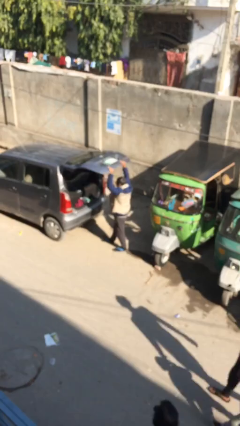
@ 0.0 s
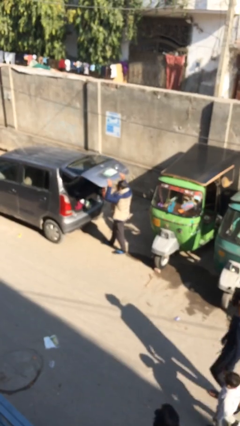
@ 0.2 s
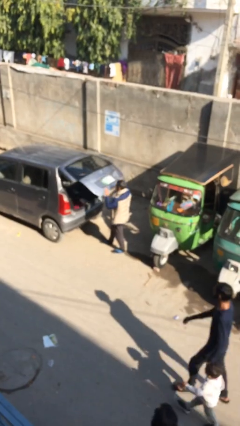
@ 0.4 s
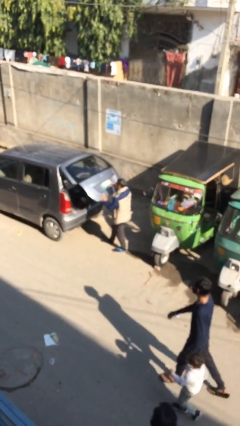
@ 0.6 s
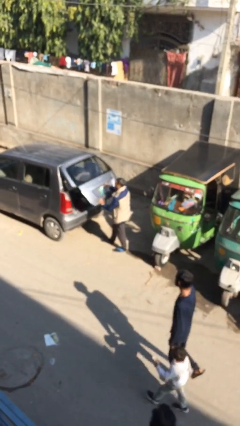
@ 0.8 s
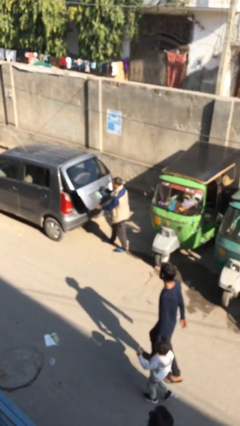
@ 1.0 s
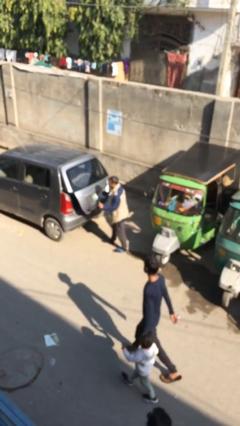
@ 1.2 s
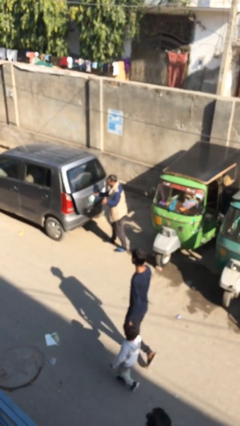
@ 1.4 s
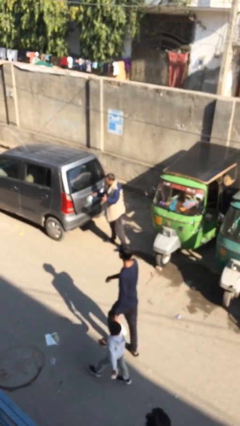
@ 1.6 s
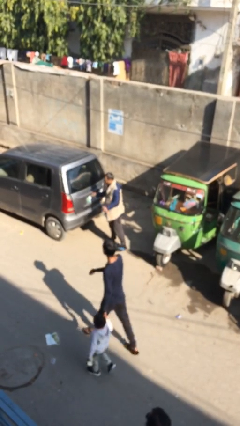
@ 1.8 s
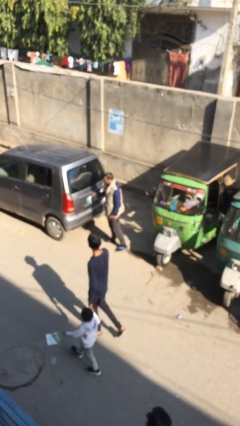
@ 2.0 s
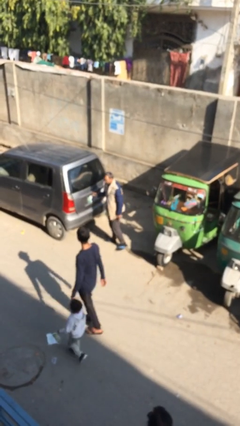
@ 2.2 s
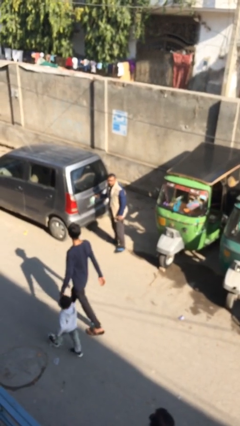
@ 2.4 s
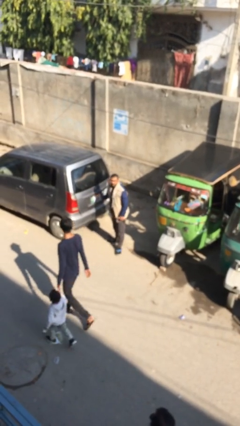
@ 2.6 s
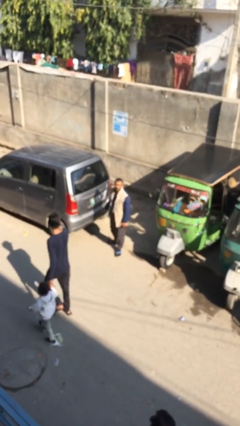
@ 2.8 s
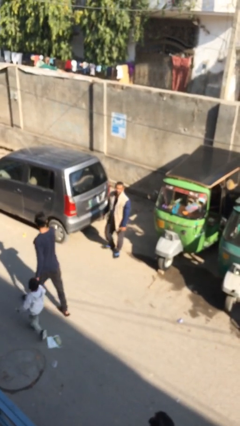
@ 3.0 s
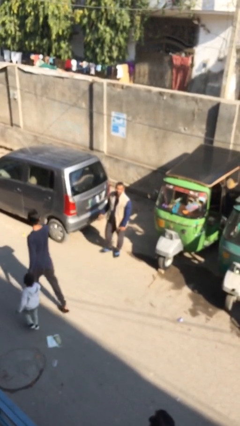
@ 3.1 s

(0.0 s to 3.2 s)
person closes car trunk

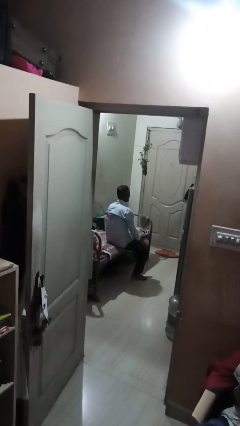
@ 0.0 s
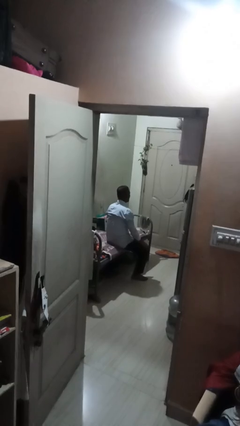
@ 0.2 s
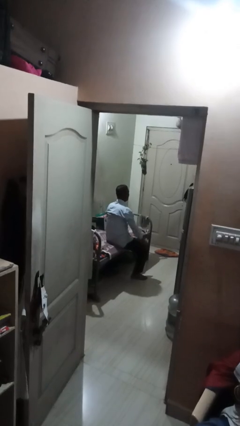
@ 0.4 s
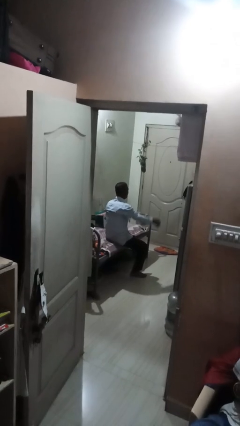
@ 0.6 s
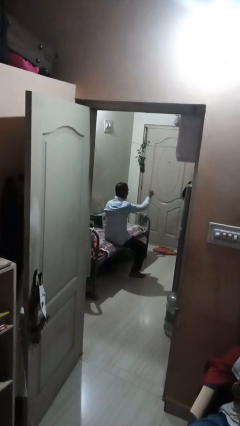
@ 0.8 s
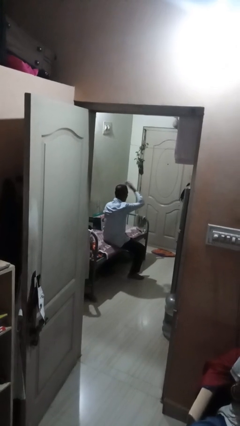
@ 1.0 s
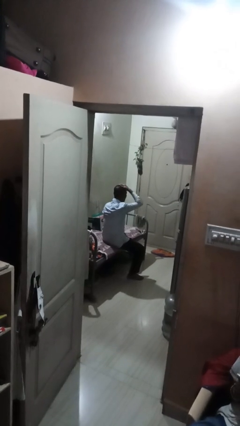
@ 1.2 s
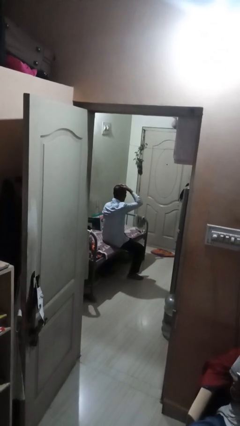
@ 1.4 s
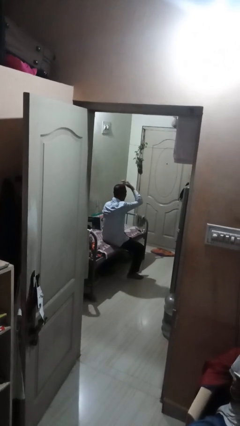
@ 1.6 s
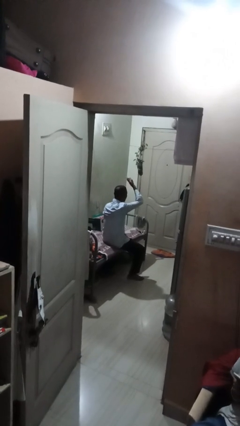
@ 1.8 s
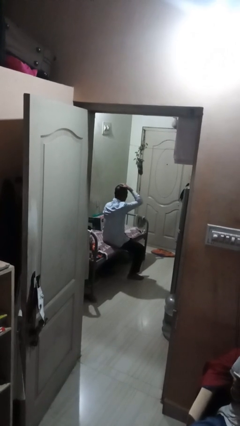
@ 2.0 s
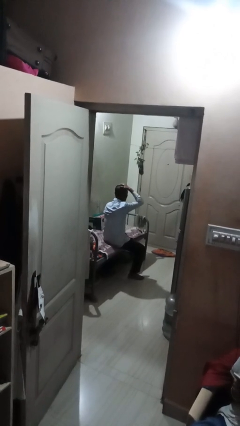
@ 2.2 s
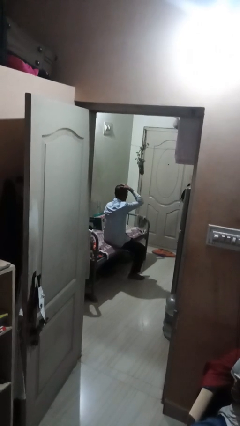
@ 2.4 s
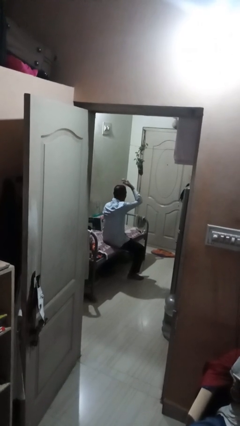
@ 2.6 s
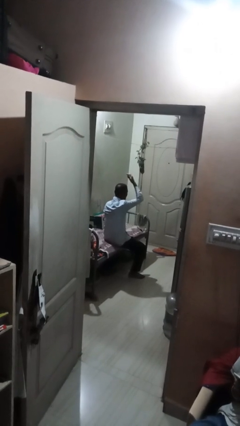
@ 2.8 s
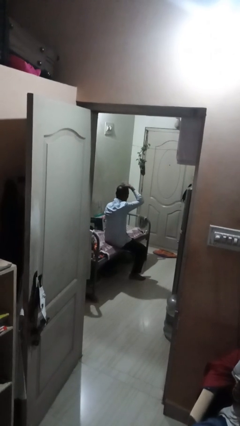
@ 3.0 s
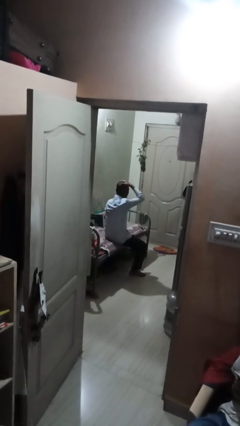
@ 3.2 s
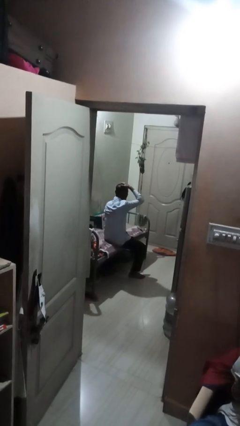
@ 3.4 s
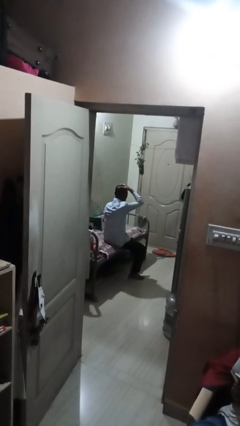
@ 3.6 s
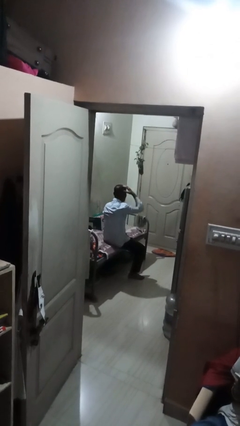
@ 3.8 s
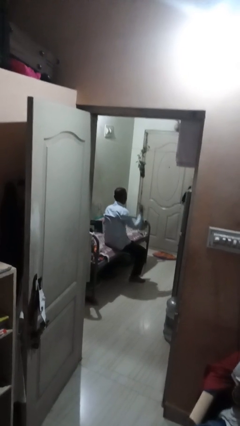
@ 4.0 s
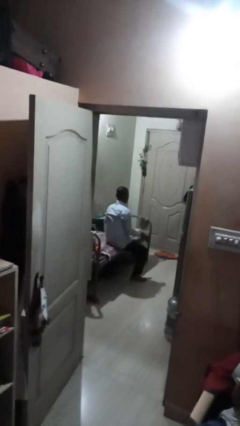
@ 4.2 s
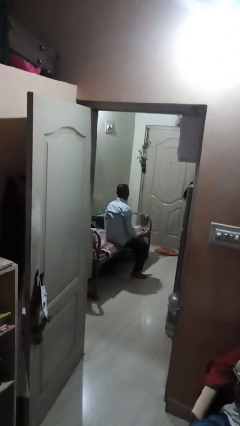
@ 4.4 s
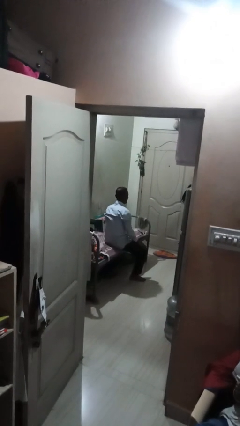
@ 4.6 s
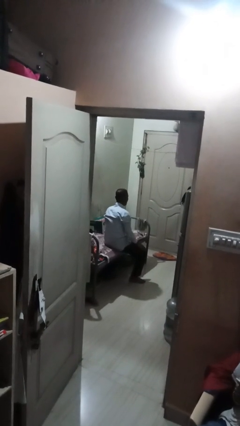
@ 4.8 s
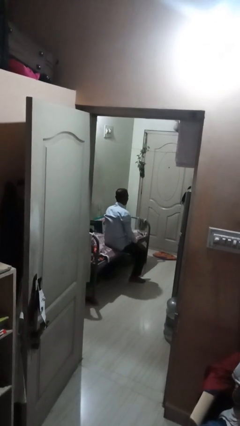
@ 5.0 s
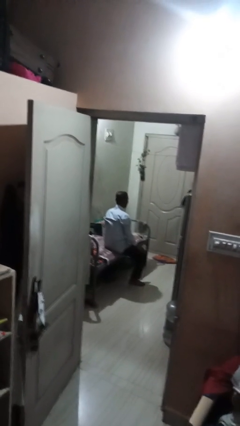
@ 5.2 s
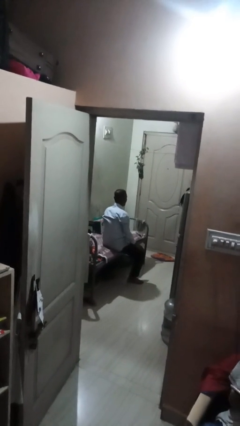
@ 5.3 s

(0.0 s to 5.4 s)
person pats head

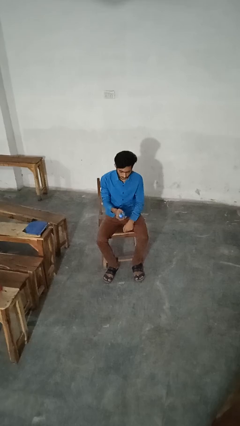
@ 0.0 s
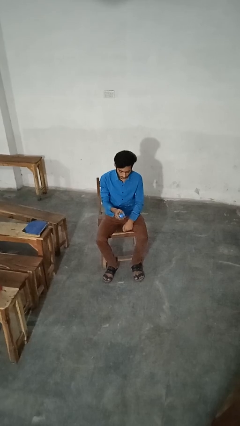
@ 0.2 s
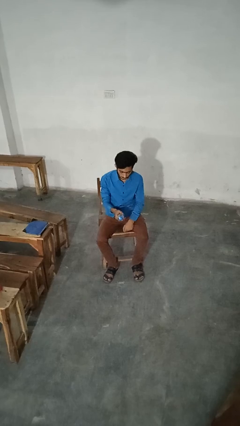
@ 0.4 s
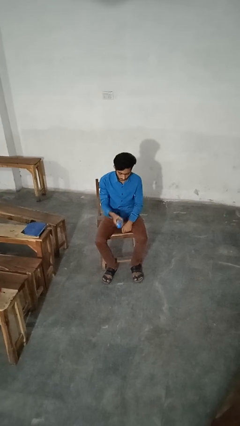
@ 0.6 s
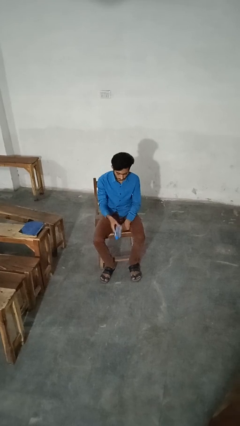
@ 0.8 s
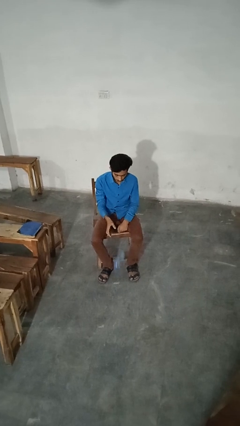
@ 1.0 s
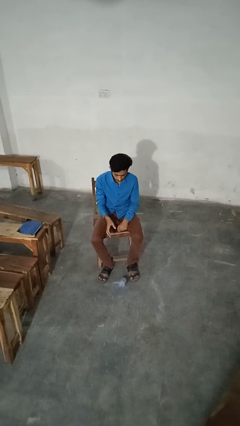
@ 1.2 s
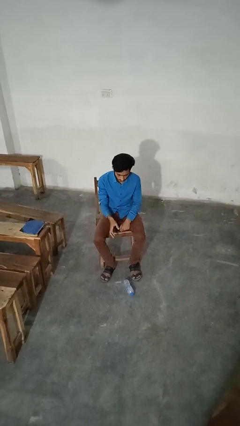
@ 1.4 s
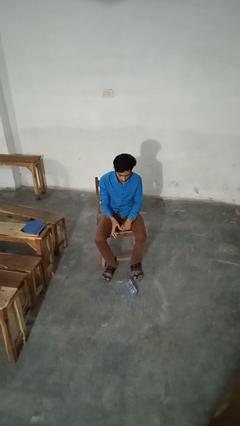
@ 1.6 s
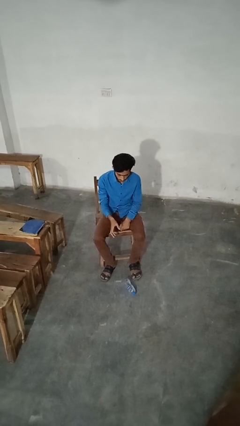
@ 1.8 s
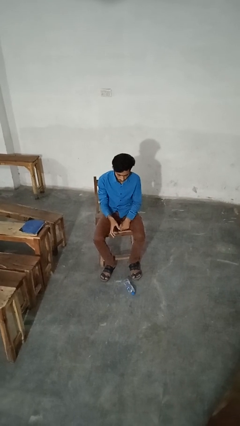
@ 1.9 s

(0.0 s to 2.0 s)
person drops object

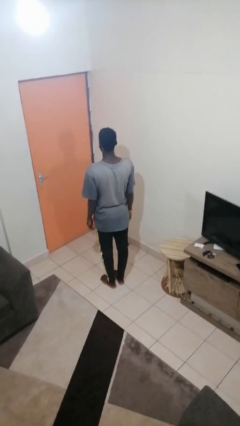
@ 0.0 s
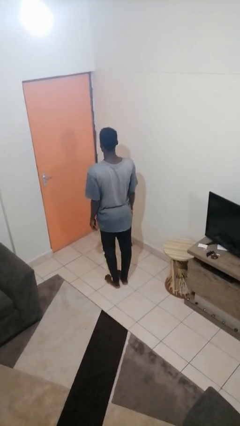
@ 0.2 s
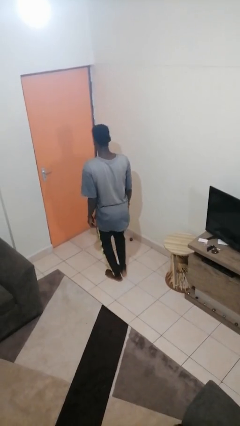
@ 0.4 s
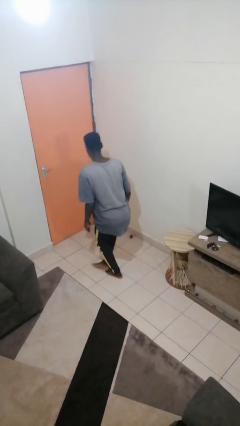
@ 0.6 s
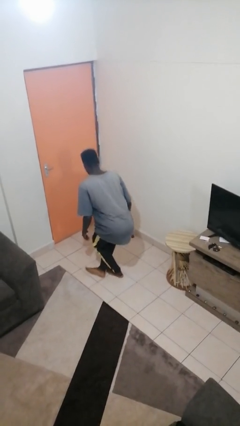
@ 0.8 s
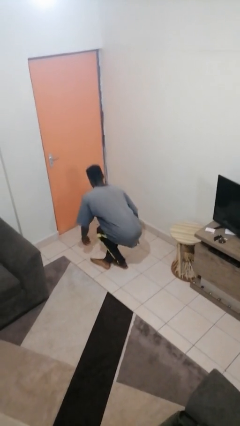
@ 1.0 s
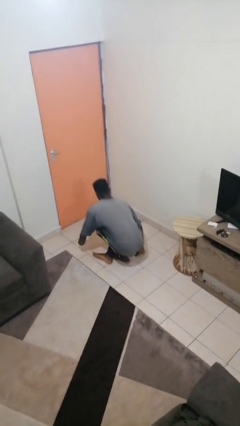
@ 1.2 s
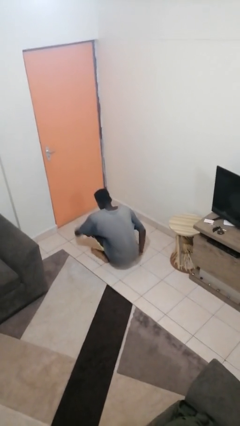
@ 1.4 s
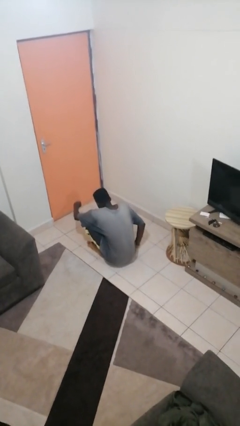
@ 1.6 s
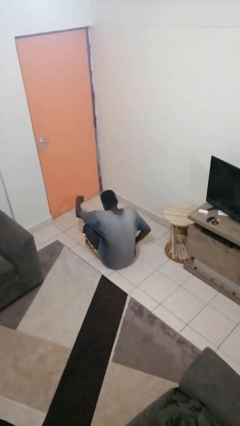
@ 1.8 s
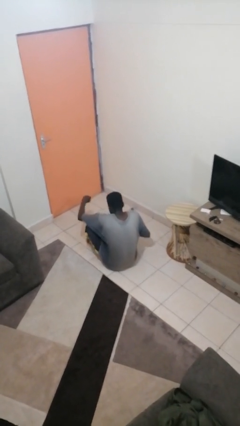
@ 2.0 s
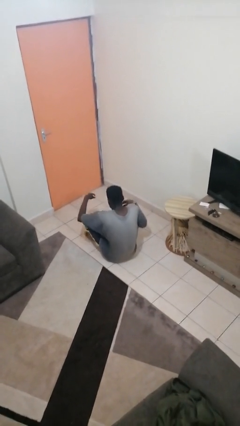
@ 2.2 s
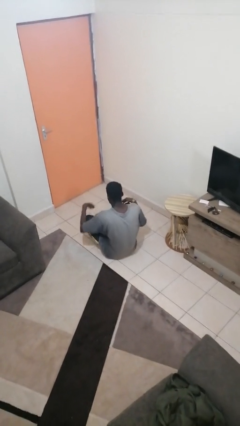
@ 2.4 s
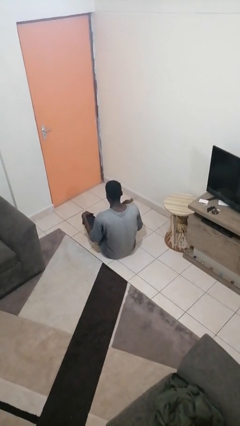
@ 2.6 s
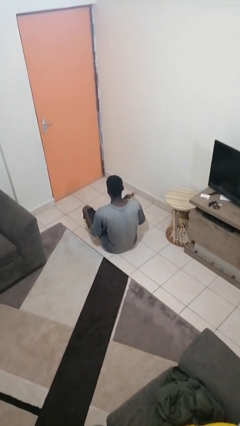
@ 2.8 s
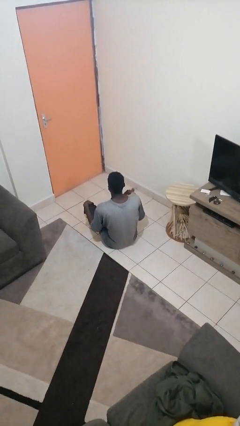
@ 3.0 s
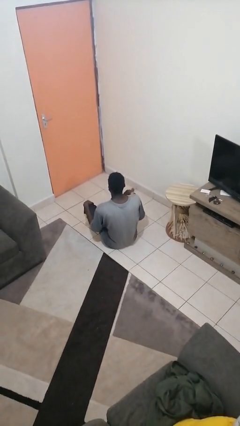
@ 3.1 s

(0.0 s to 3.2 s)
person sits crisscross

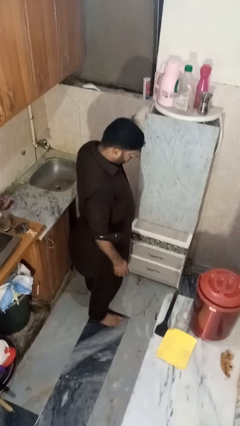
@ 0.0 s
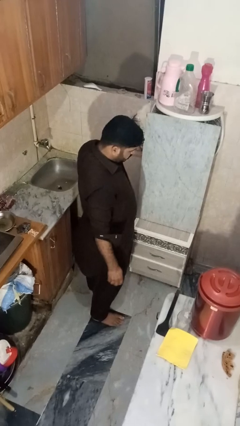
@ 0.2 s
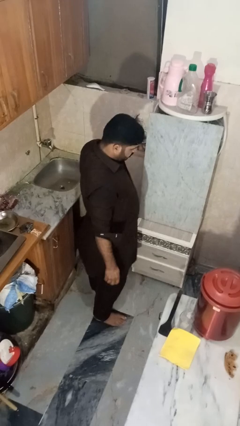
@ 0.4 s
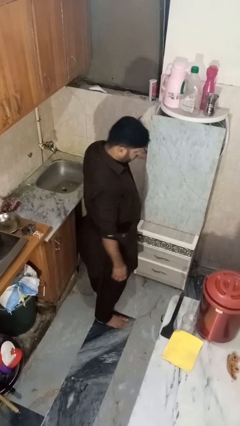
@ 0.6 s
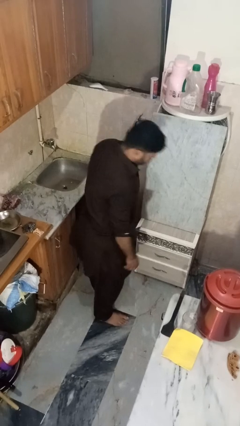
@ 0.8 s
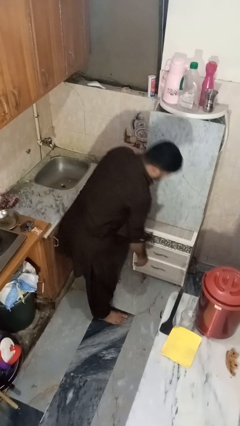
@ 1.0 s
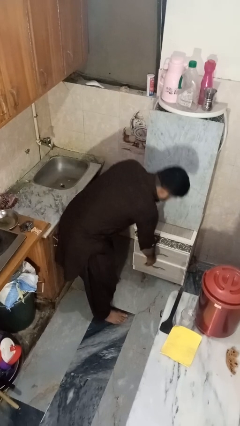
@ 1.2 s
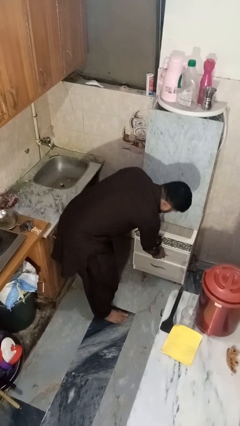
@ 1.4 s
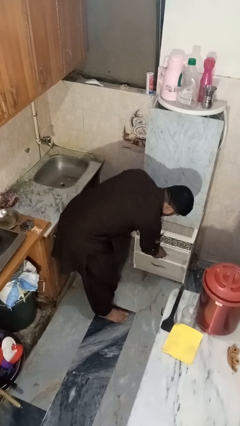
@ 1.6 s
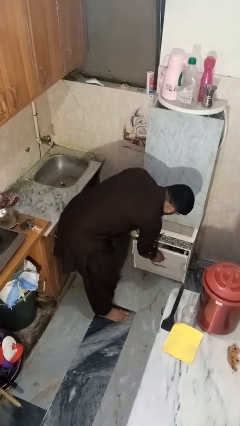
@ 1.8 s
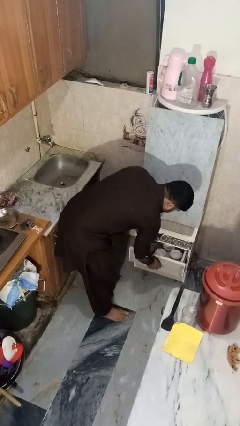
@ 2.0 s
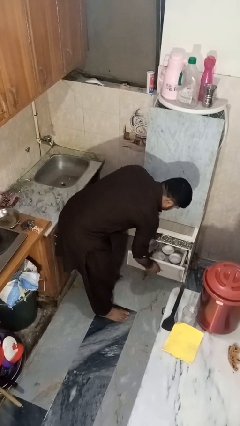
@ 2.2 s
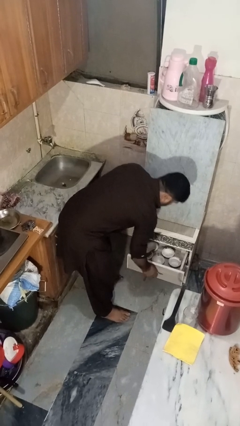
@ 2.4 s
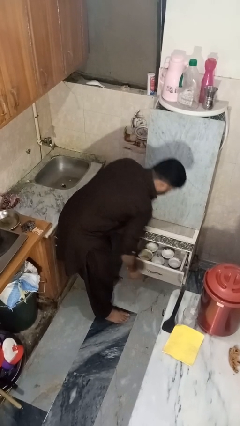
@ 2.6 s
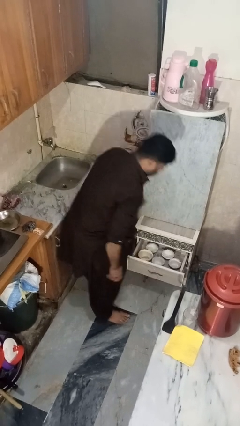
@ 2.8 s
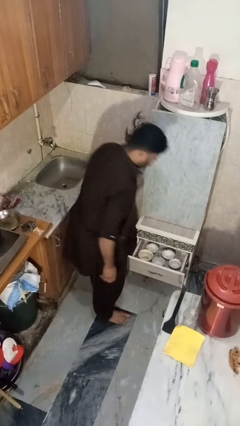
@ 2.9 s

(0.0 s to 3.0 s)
person opens kitchen drawer

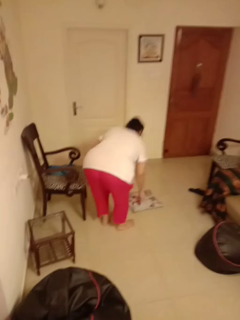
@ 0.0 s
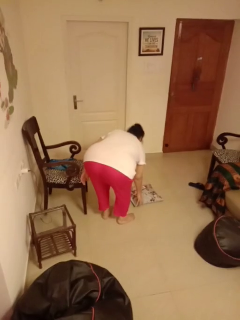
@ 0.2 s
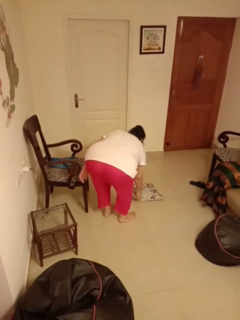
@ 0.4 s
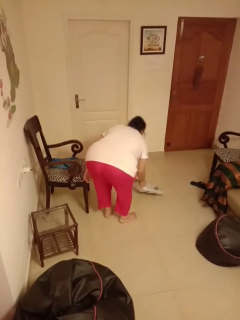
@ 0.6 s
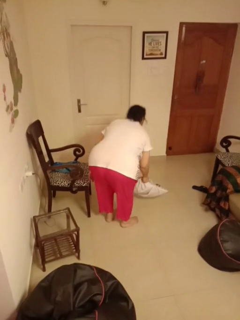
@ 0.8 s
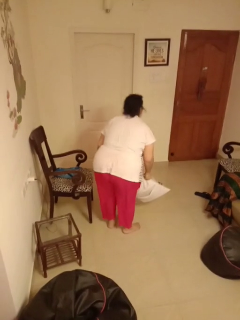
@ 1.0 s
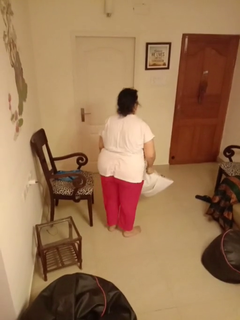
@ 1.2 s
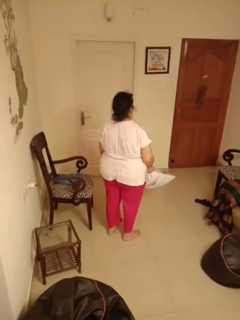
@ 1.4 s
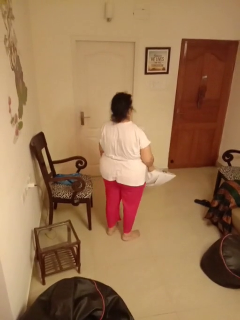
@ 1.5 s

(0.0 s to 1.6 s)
person picks up object from floor
